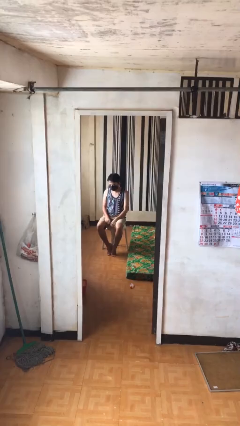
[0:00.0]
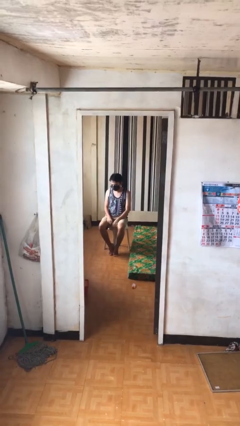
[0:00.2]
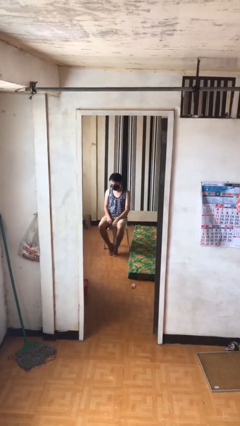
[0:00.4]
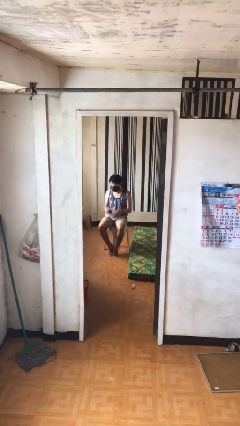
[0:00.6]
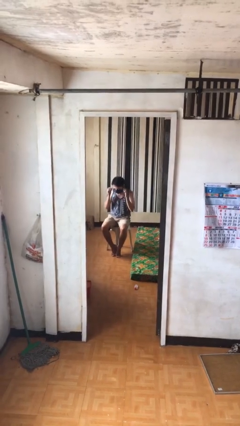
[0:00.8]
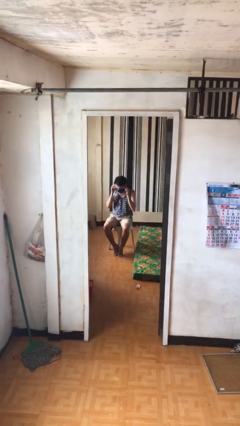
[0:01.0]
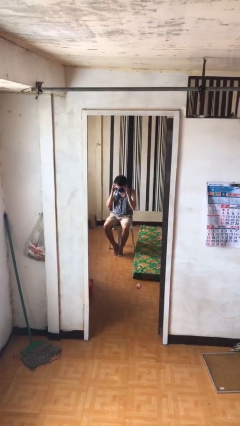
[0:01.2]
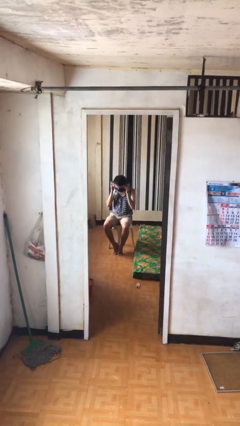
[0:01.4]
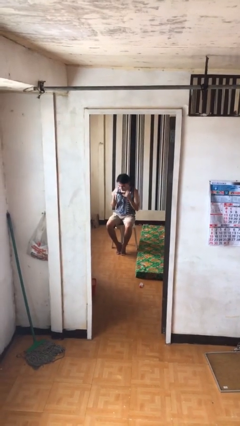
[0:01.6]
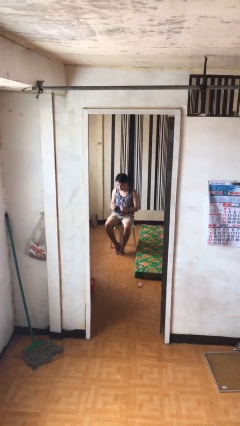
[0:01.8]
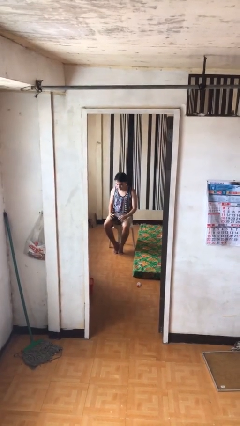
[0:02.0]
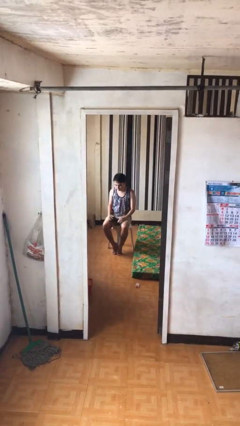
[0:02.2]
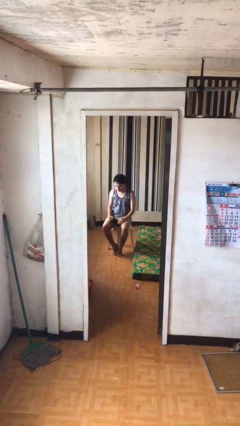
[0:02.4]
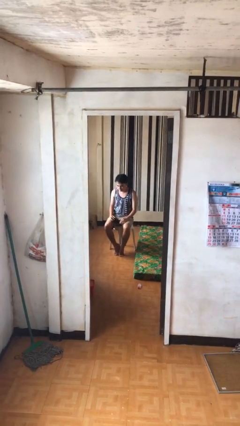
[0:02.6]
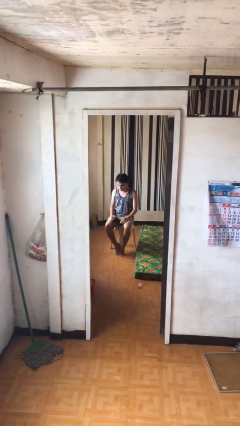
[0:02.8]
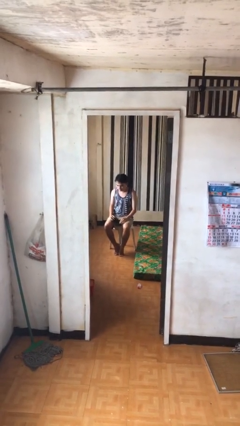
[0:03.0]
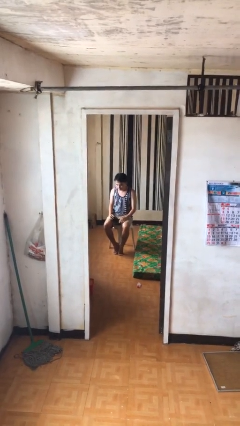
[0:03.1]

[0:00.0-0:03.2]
person takes off facemask

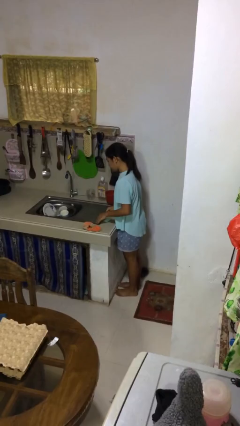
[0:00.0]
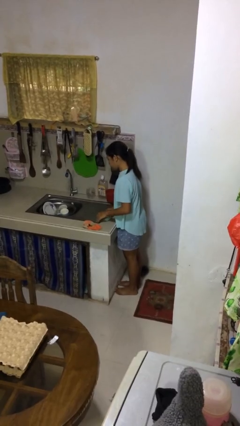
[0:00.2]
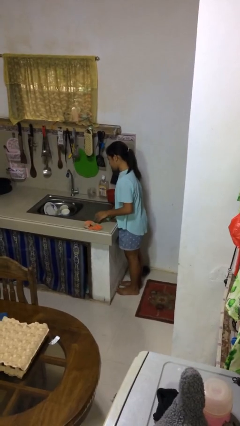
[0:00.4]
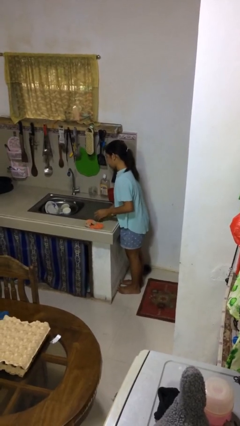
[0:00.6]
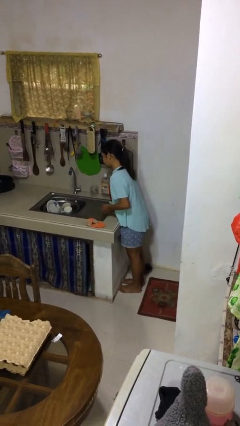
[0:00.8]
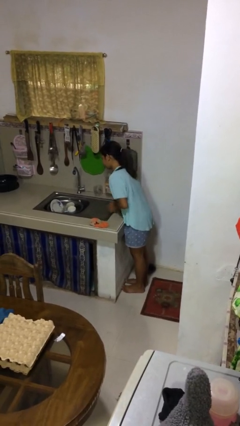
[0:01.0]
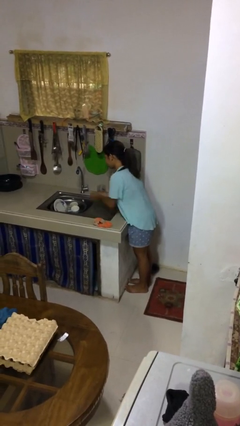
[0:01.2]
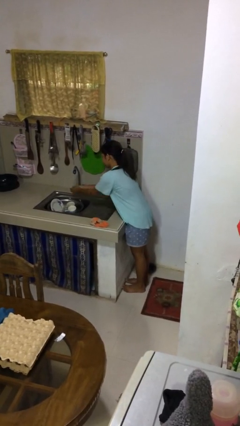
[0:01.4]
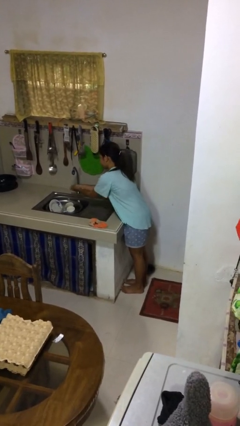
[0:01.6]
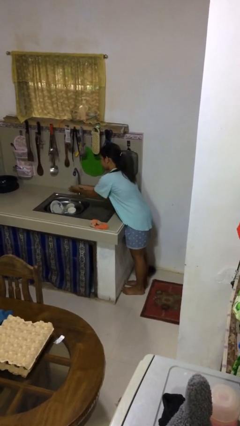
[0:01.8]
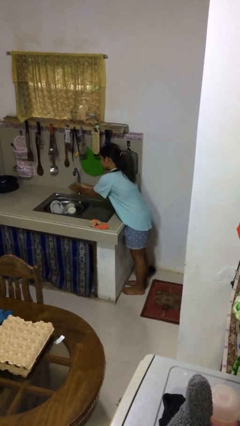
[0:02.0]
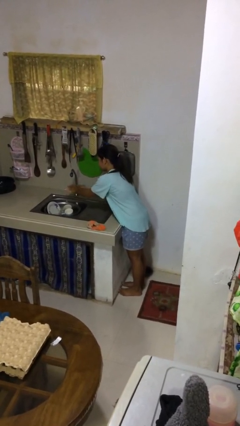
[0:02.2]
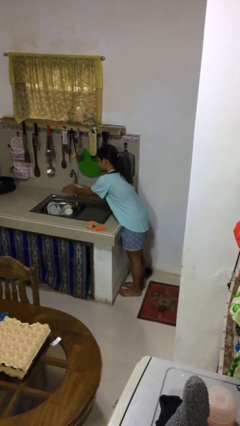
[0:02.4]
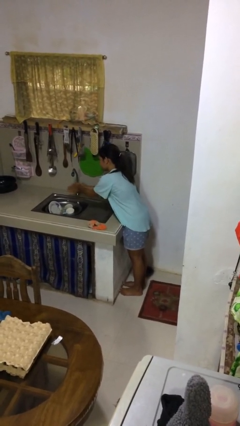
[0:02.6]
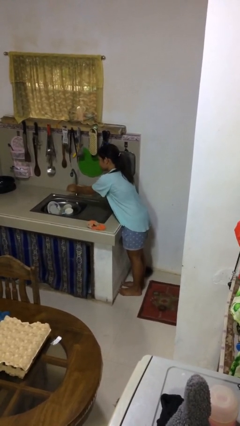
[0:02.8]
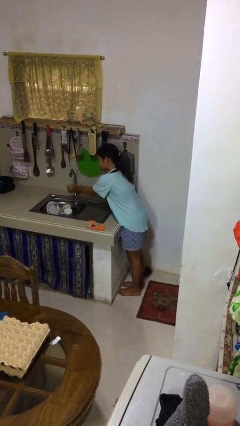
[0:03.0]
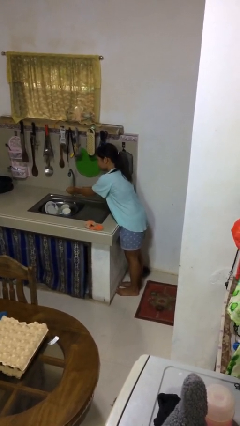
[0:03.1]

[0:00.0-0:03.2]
person washes hands

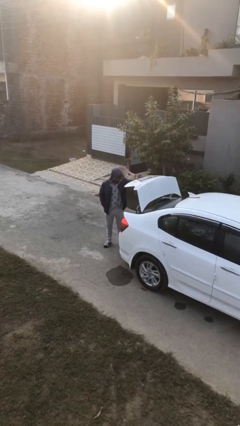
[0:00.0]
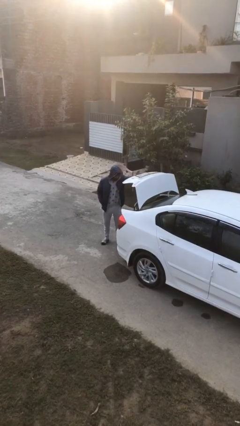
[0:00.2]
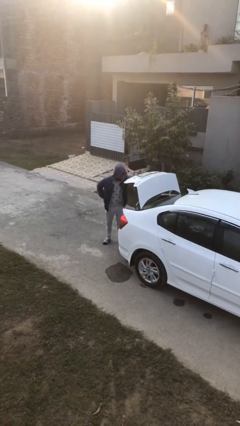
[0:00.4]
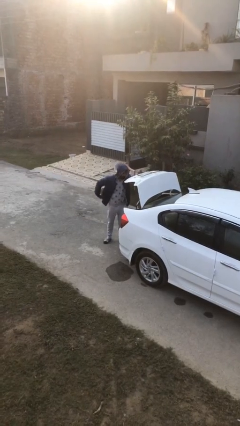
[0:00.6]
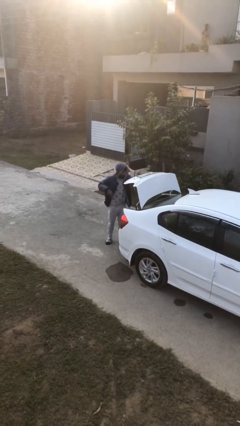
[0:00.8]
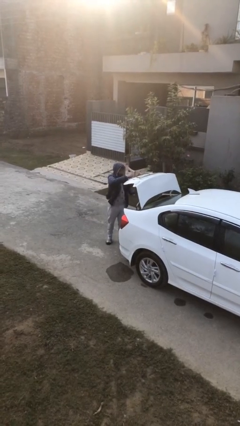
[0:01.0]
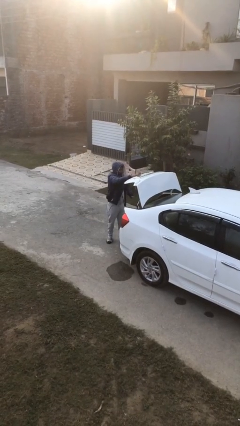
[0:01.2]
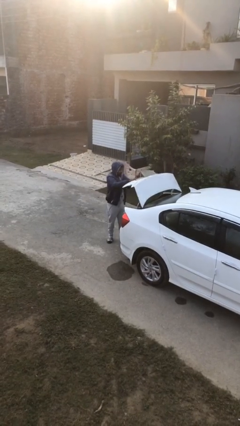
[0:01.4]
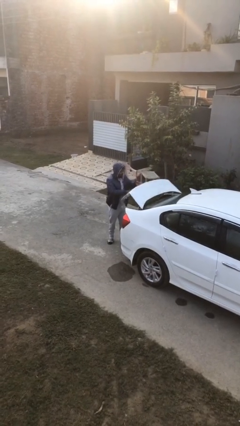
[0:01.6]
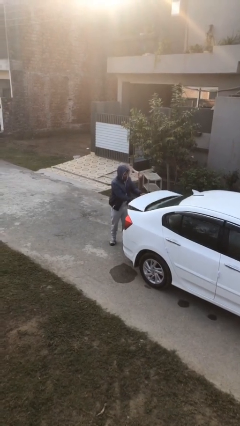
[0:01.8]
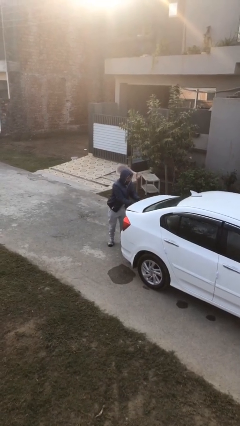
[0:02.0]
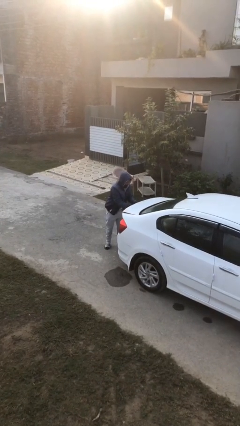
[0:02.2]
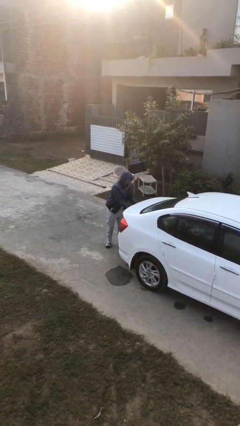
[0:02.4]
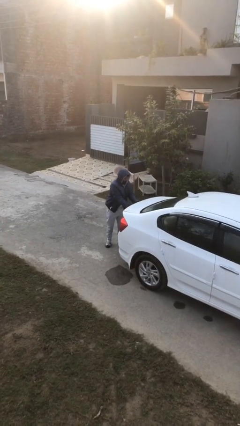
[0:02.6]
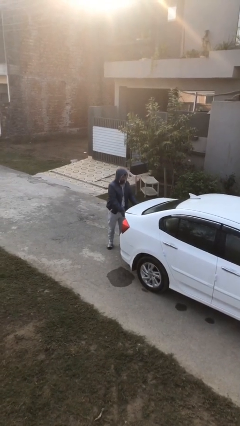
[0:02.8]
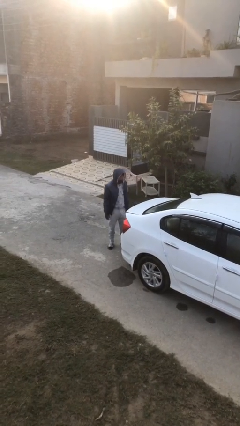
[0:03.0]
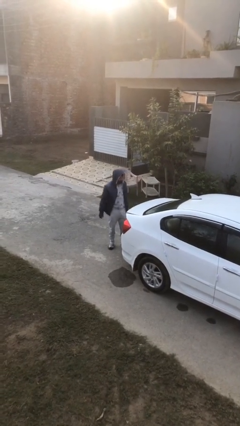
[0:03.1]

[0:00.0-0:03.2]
person closes car trunk

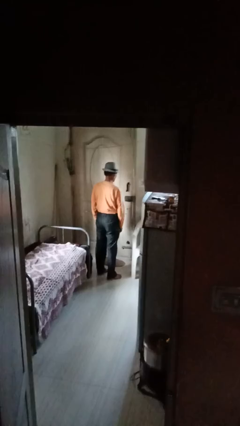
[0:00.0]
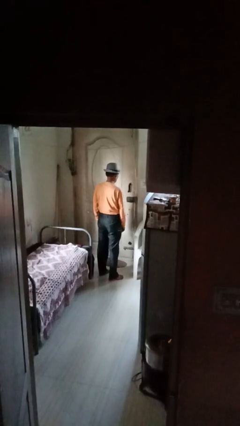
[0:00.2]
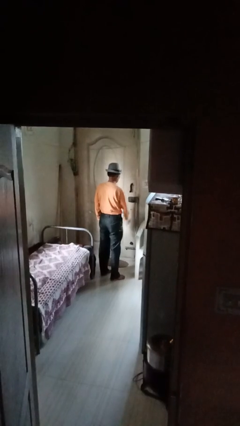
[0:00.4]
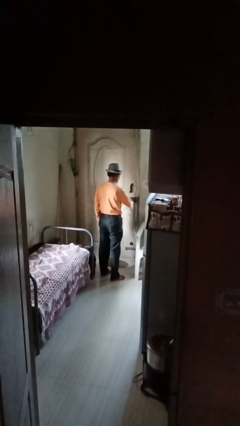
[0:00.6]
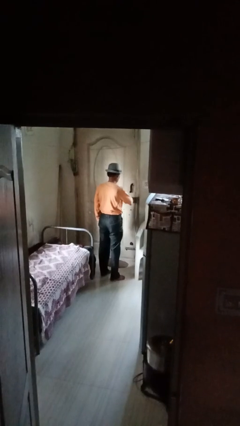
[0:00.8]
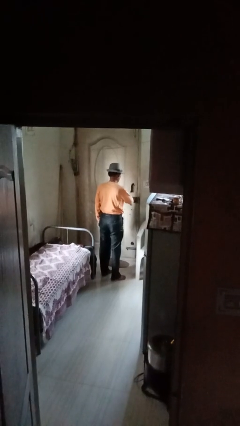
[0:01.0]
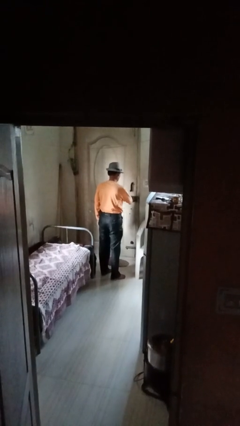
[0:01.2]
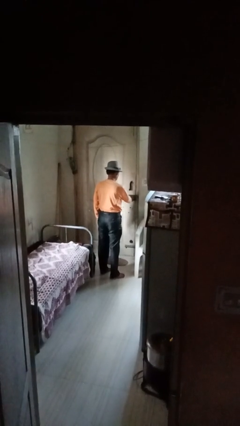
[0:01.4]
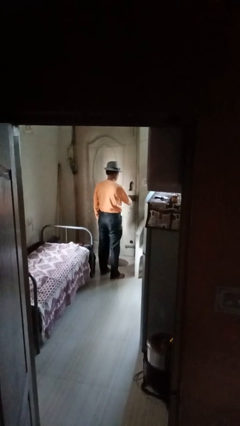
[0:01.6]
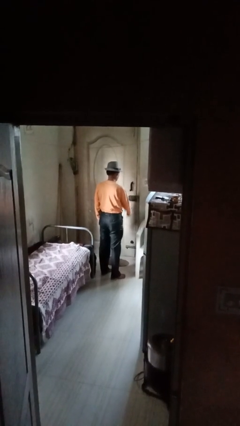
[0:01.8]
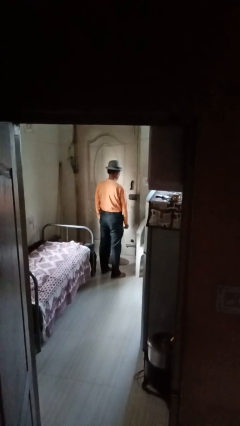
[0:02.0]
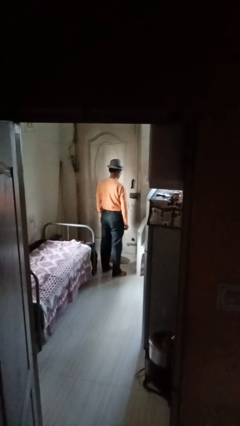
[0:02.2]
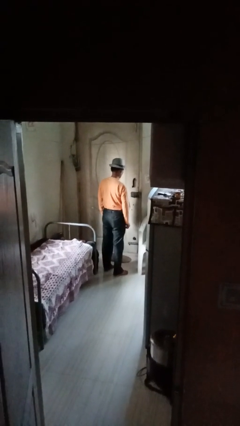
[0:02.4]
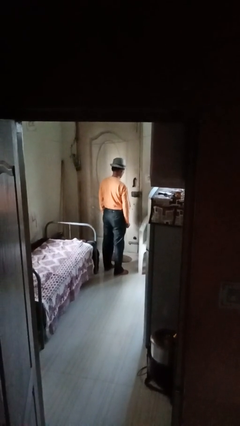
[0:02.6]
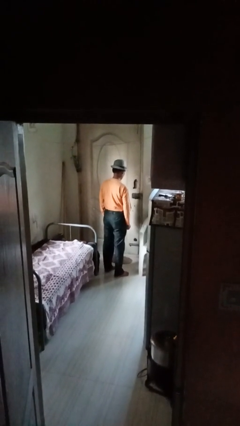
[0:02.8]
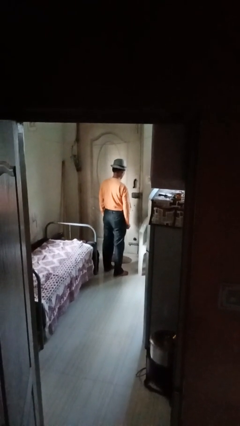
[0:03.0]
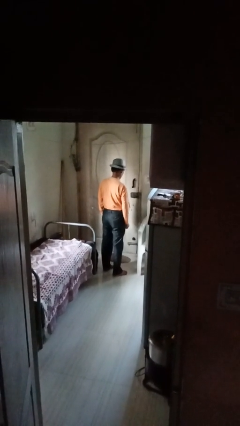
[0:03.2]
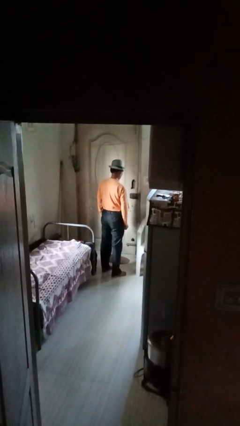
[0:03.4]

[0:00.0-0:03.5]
person locks door with keys

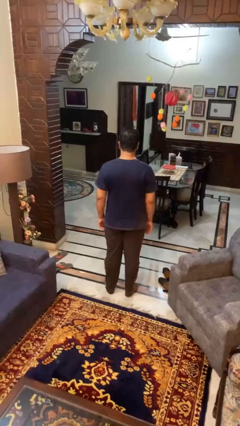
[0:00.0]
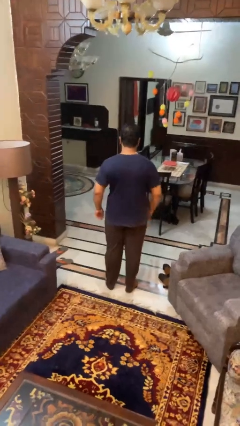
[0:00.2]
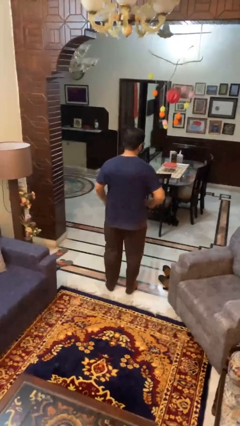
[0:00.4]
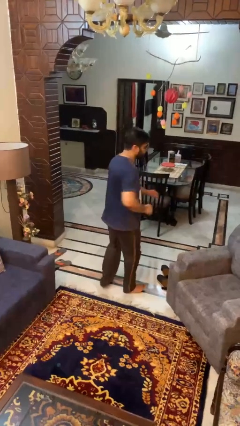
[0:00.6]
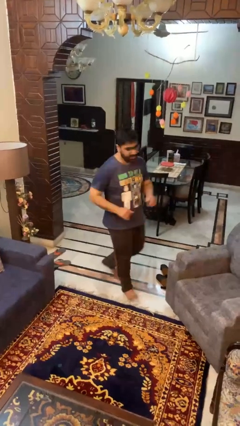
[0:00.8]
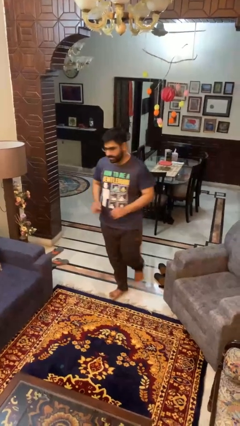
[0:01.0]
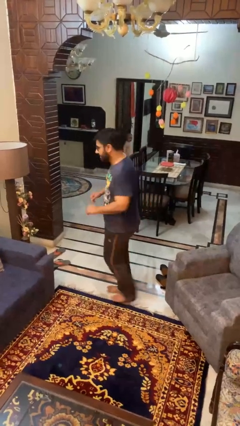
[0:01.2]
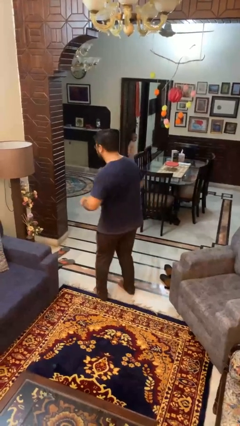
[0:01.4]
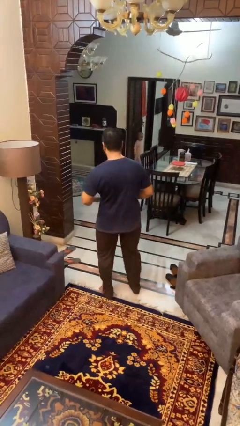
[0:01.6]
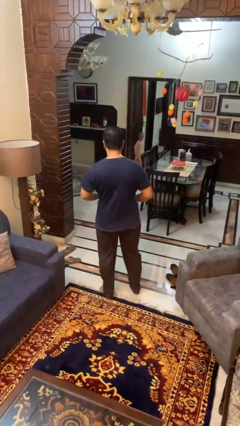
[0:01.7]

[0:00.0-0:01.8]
person twirls

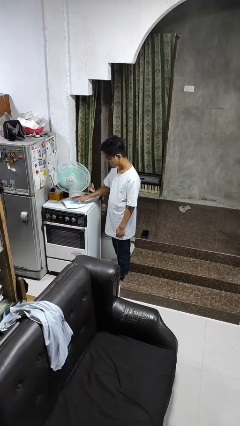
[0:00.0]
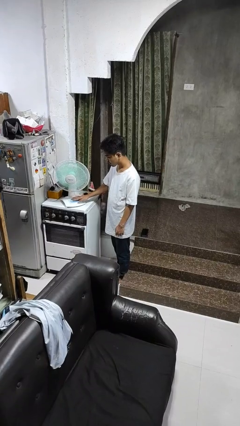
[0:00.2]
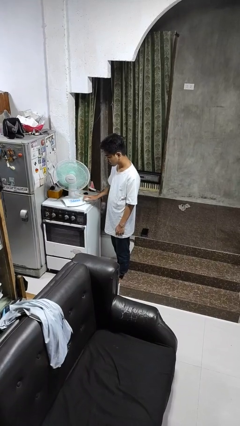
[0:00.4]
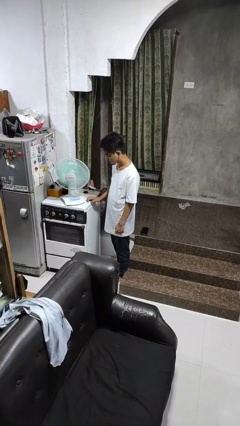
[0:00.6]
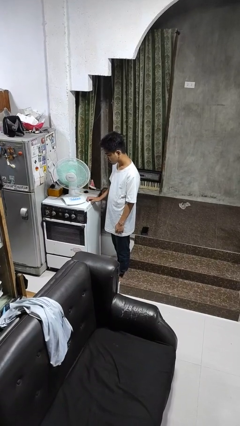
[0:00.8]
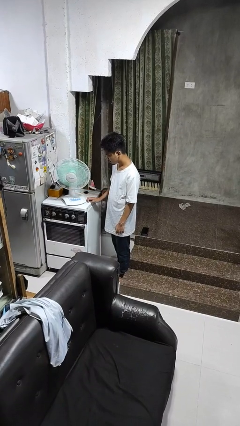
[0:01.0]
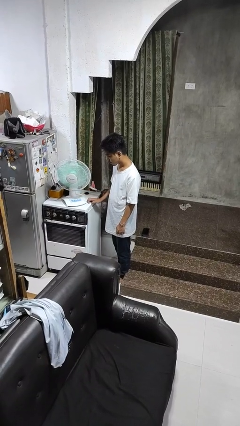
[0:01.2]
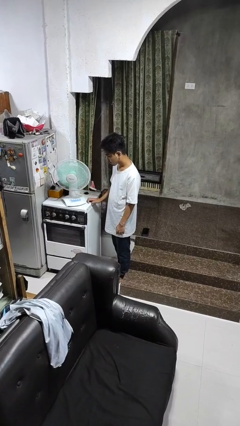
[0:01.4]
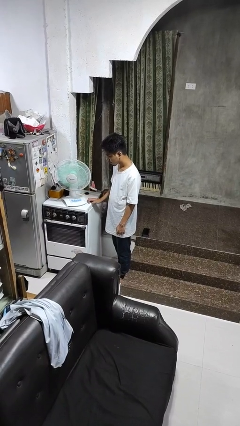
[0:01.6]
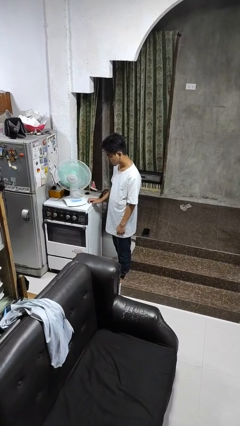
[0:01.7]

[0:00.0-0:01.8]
person turns off fan

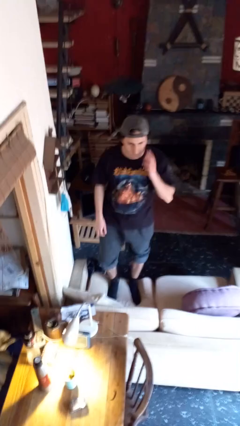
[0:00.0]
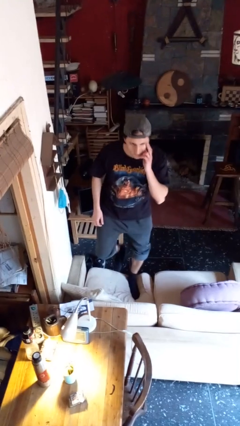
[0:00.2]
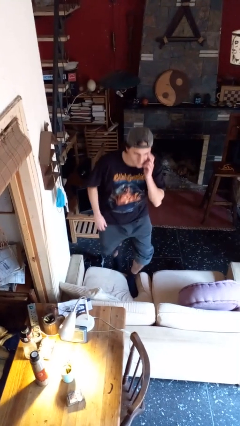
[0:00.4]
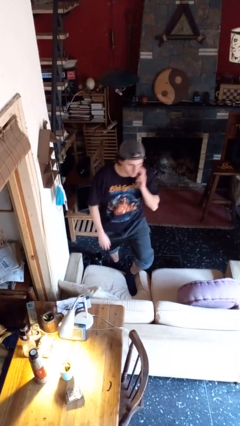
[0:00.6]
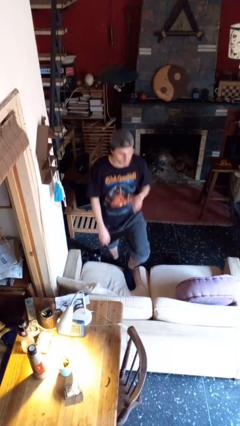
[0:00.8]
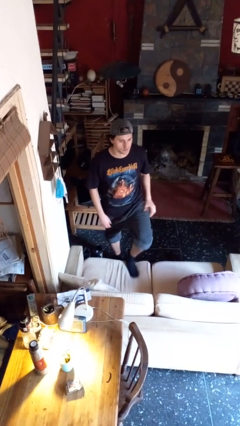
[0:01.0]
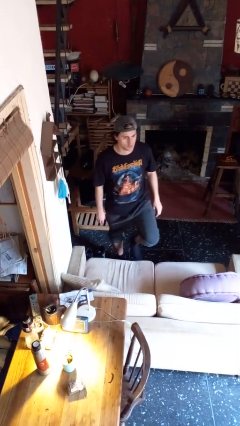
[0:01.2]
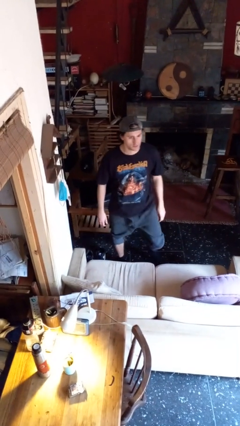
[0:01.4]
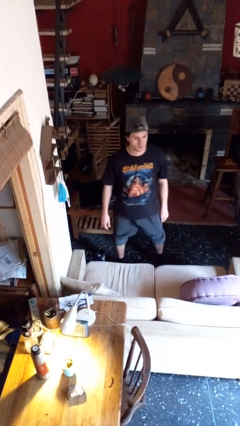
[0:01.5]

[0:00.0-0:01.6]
person climbs off couch
